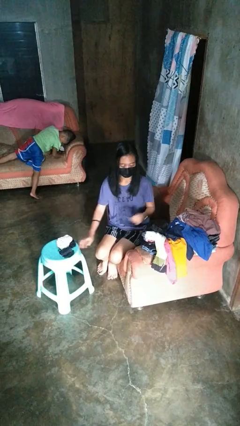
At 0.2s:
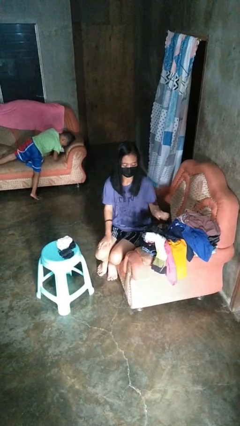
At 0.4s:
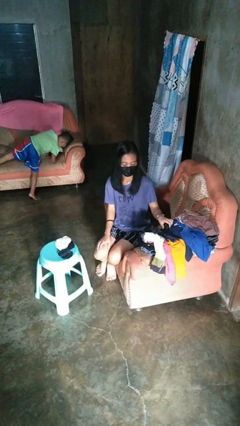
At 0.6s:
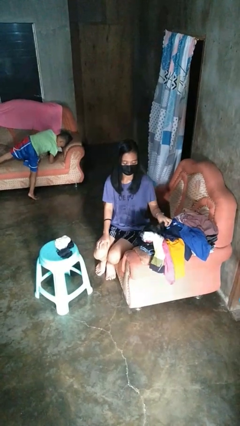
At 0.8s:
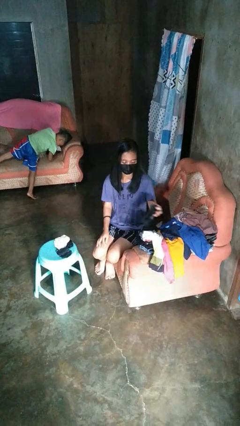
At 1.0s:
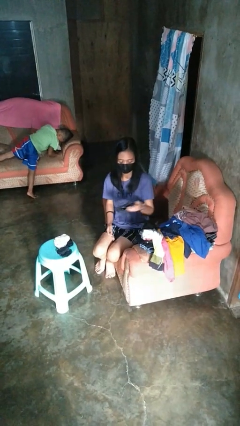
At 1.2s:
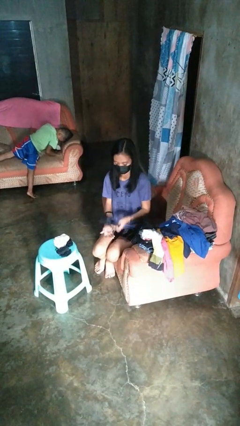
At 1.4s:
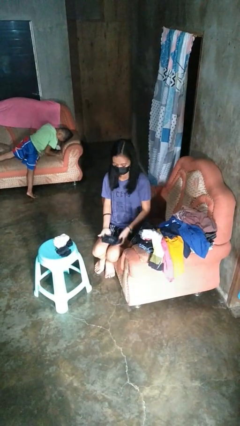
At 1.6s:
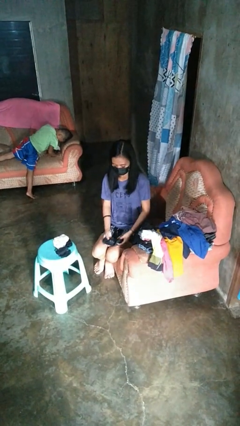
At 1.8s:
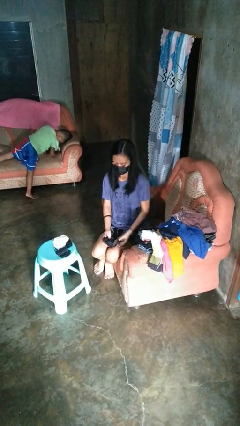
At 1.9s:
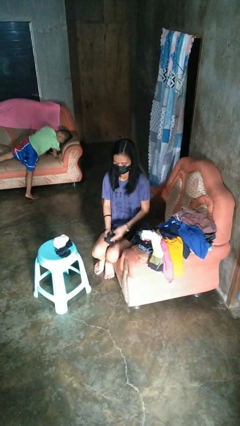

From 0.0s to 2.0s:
person folds socks

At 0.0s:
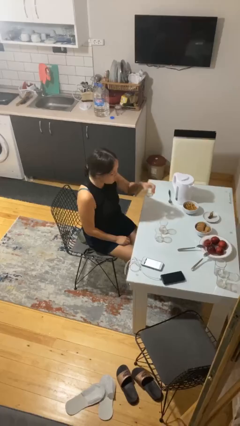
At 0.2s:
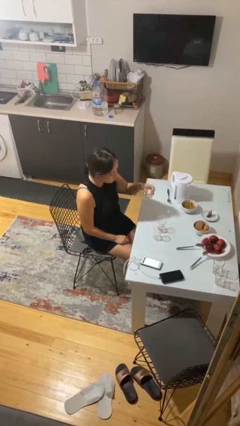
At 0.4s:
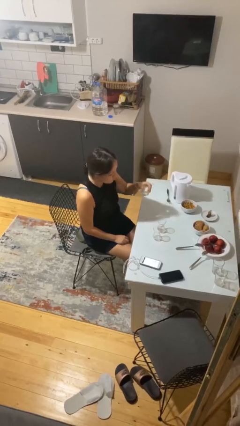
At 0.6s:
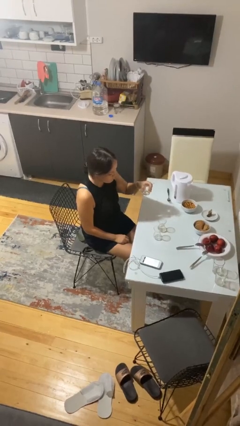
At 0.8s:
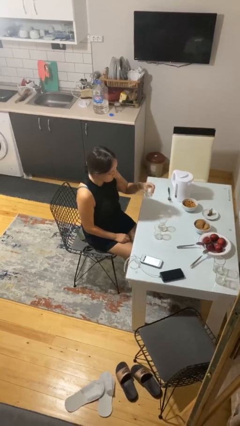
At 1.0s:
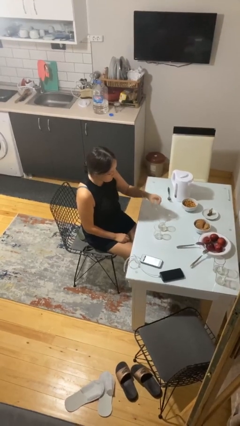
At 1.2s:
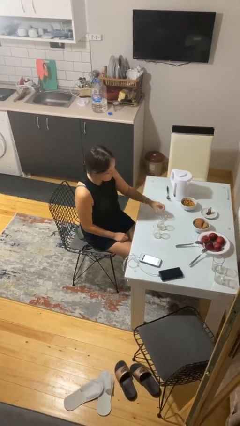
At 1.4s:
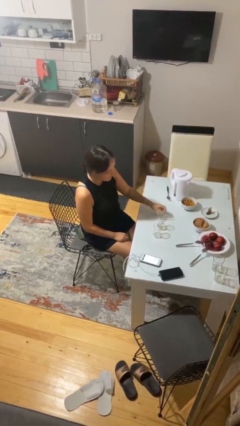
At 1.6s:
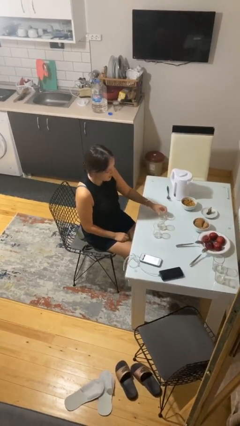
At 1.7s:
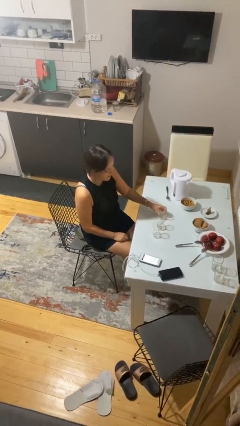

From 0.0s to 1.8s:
person puts down object on table

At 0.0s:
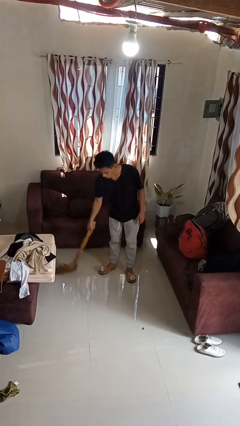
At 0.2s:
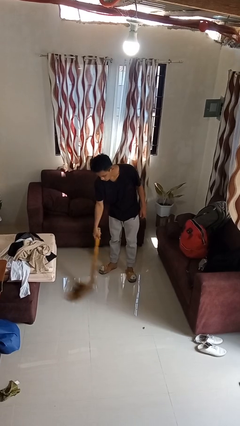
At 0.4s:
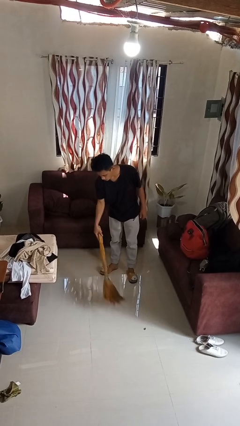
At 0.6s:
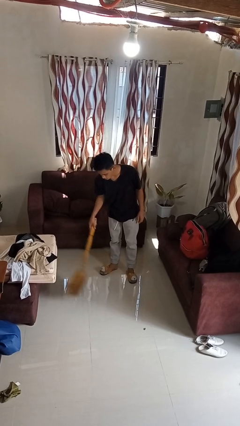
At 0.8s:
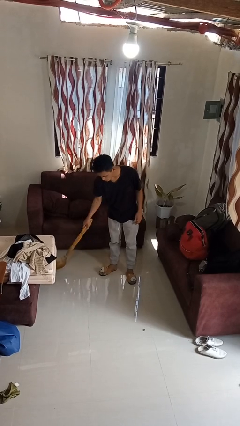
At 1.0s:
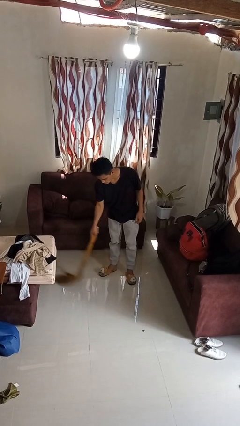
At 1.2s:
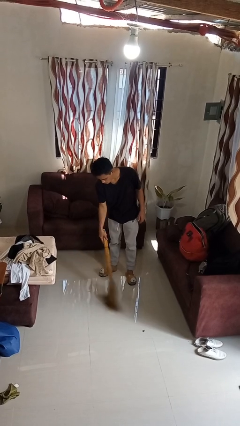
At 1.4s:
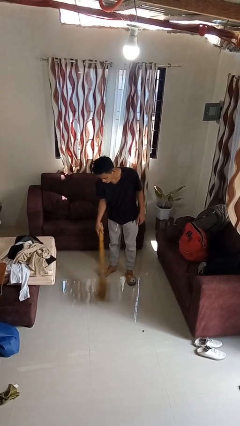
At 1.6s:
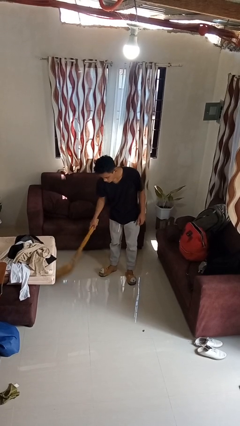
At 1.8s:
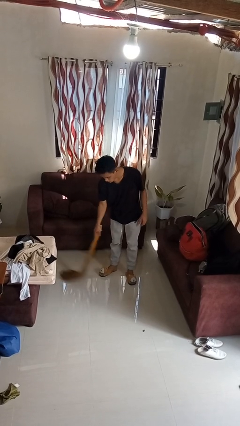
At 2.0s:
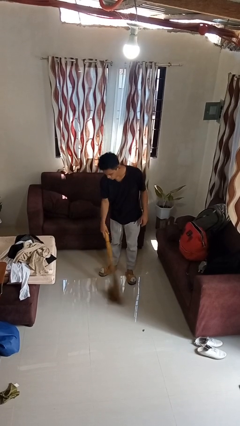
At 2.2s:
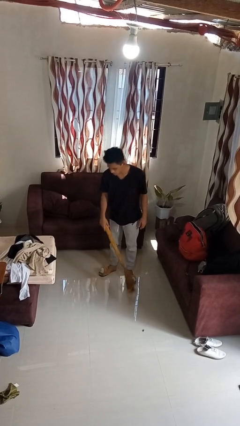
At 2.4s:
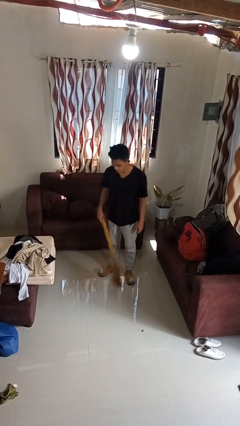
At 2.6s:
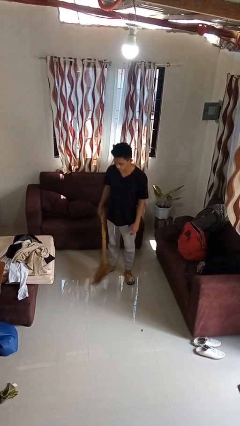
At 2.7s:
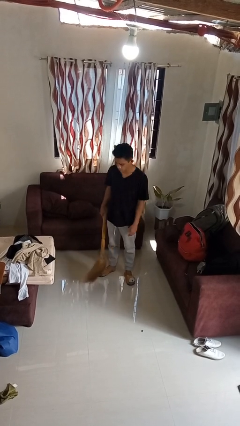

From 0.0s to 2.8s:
person sweeps floor

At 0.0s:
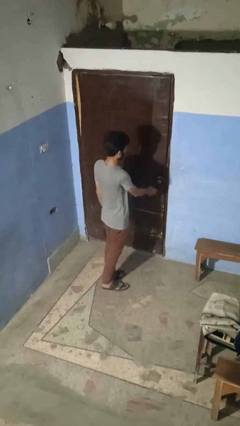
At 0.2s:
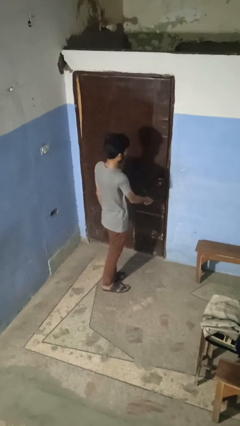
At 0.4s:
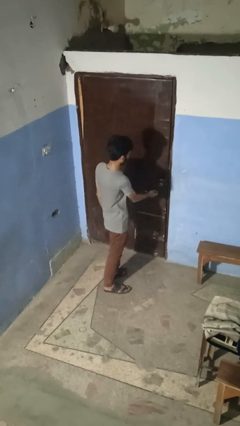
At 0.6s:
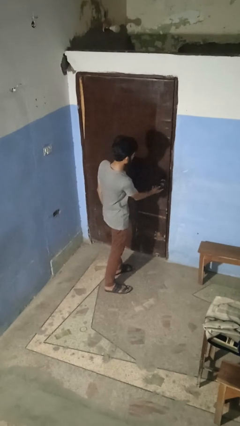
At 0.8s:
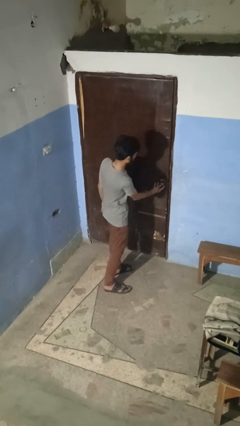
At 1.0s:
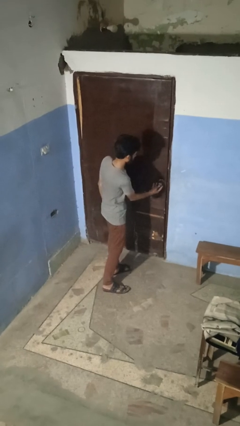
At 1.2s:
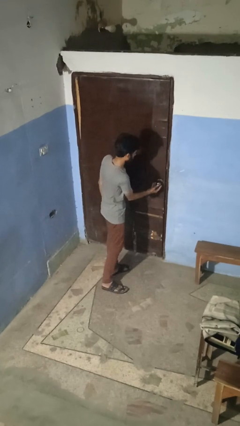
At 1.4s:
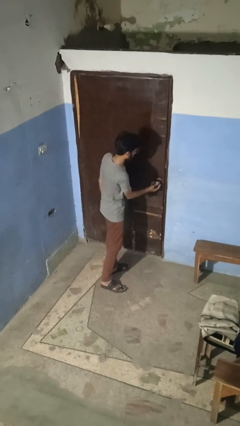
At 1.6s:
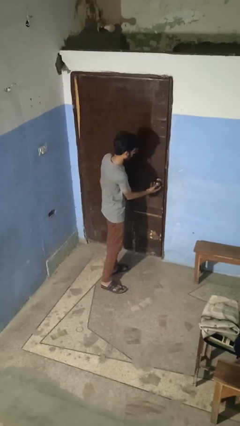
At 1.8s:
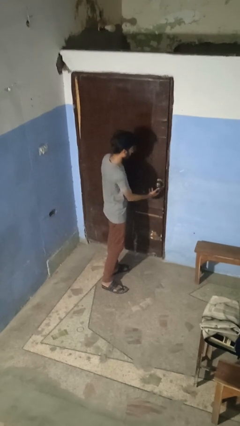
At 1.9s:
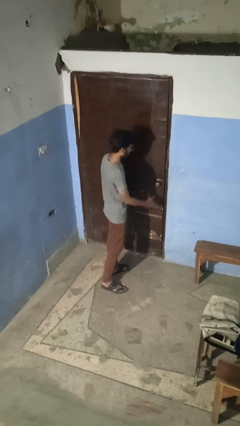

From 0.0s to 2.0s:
person locks door with keys

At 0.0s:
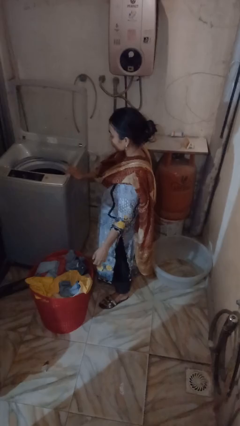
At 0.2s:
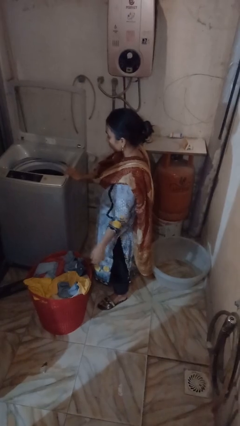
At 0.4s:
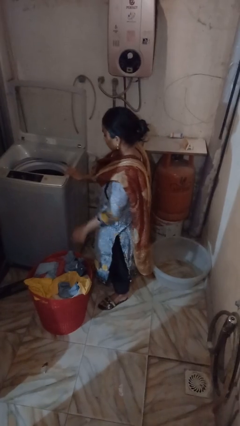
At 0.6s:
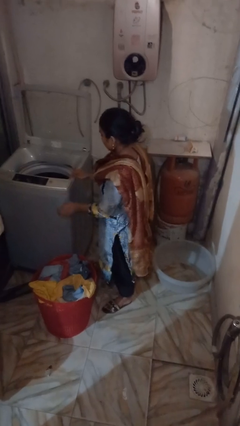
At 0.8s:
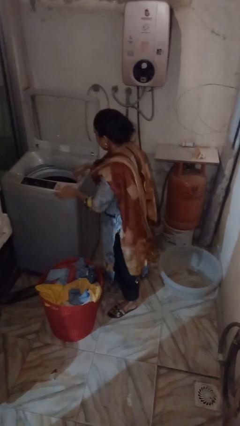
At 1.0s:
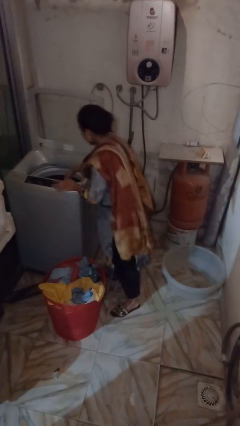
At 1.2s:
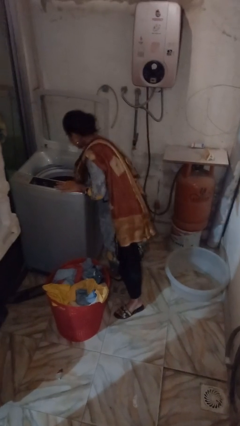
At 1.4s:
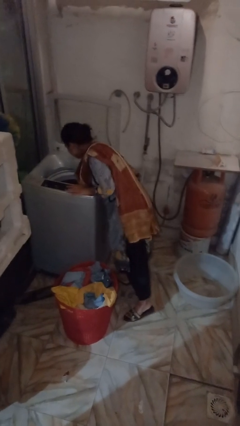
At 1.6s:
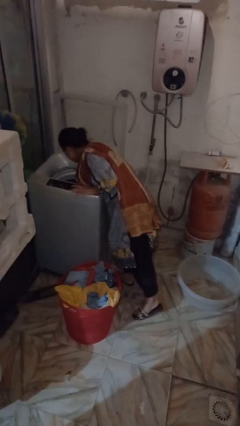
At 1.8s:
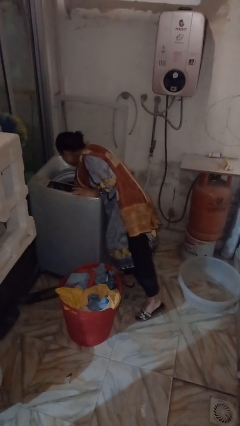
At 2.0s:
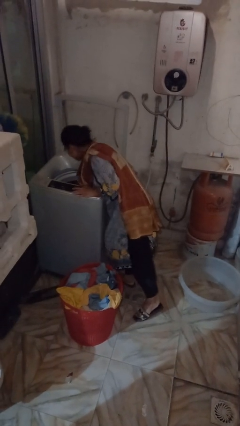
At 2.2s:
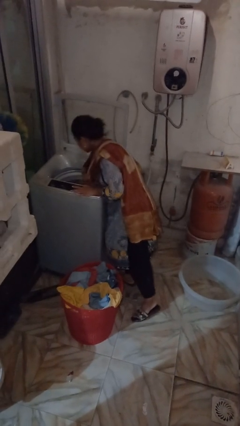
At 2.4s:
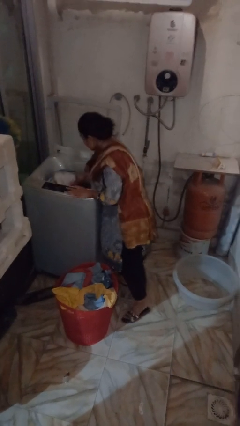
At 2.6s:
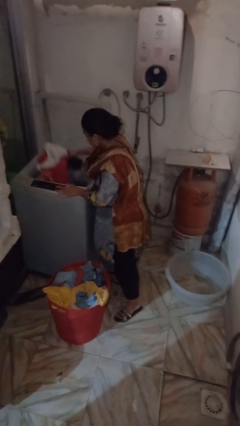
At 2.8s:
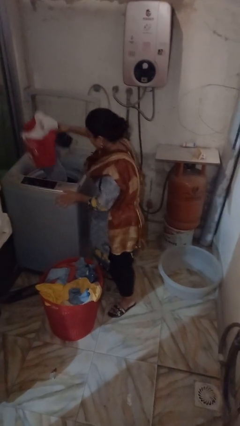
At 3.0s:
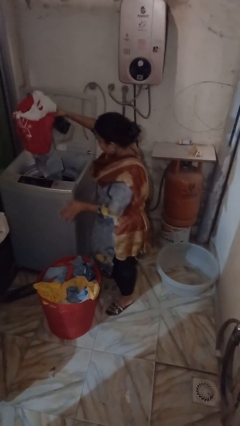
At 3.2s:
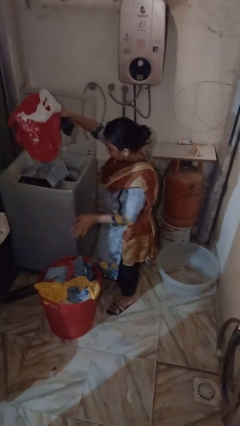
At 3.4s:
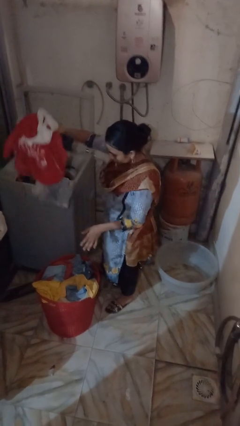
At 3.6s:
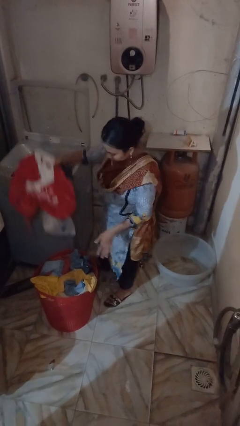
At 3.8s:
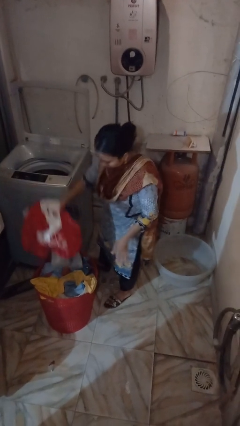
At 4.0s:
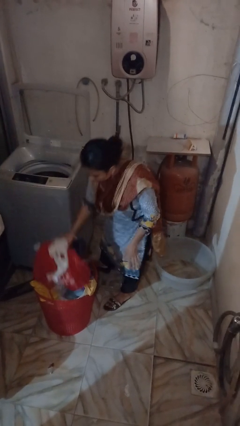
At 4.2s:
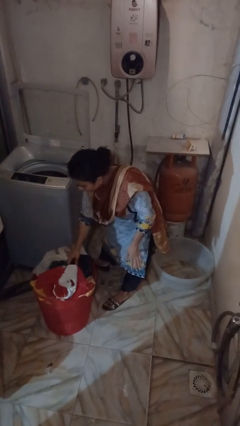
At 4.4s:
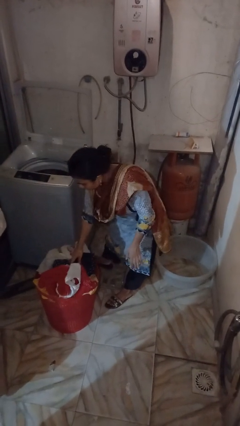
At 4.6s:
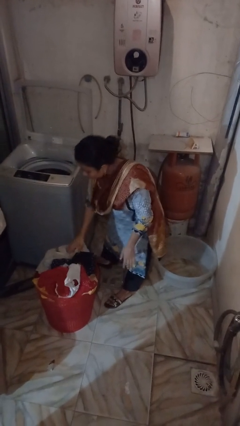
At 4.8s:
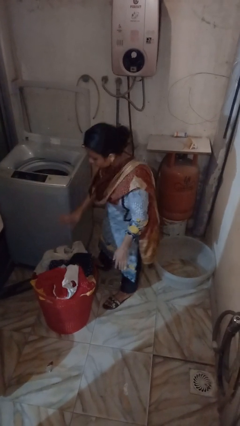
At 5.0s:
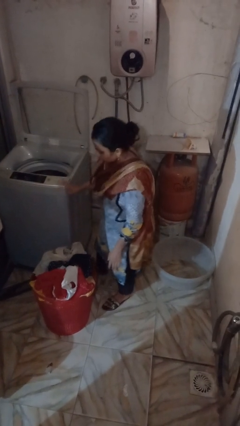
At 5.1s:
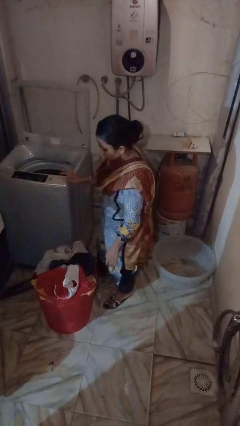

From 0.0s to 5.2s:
person unloads dryer

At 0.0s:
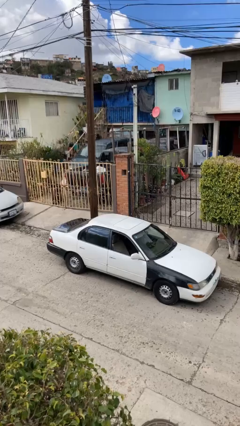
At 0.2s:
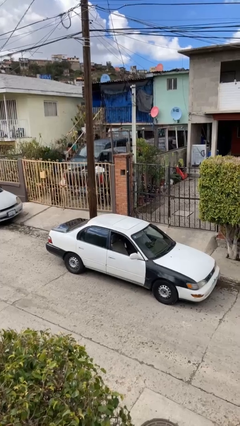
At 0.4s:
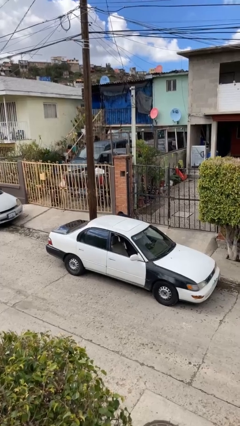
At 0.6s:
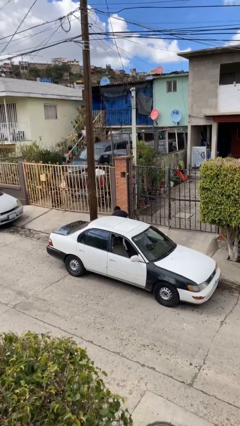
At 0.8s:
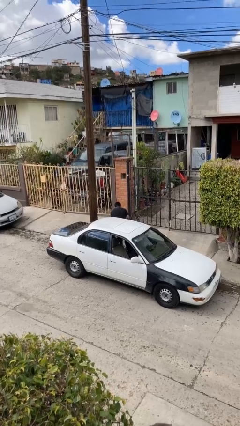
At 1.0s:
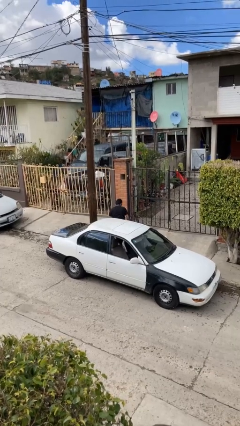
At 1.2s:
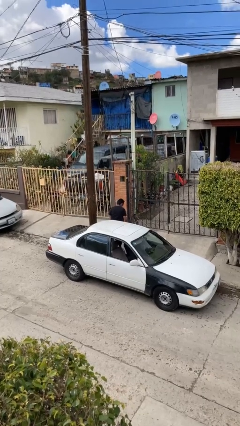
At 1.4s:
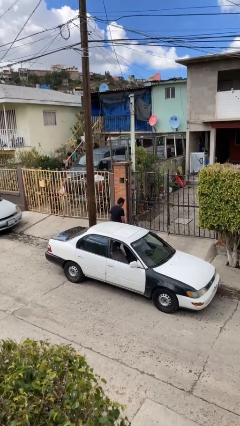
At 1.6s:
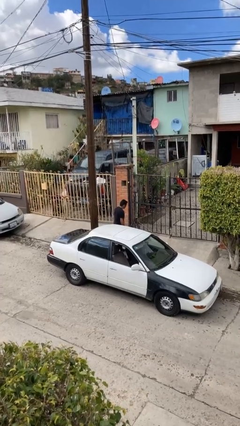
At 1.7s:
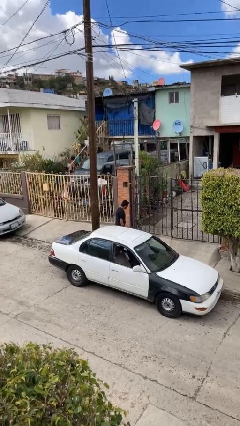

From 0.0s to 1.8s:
person exits car

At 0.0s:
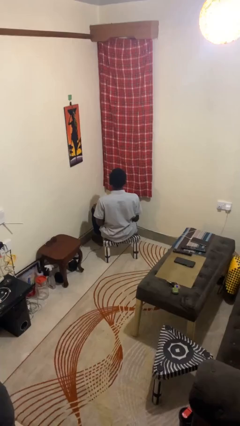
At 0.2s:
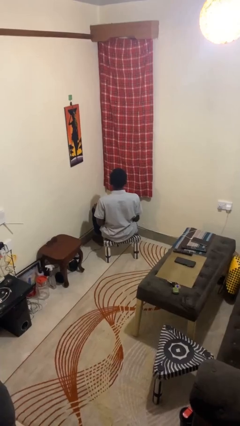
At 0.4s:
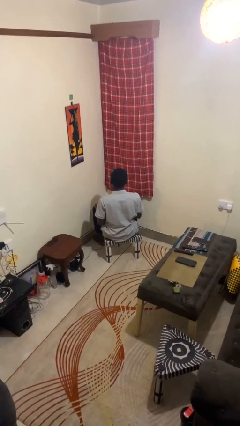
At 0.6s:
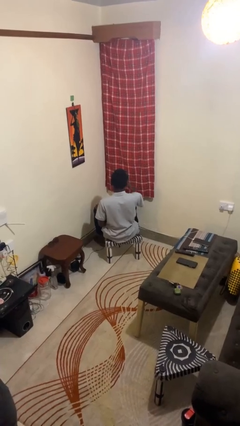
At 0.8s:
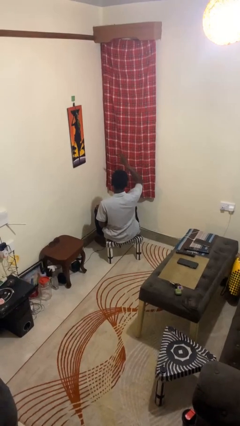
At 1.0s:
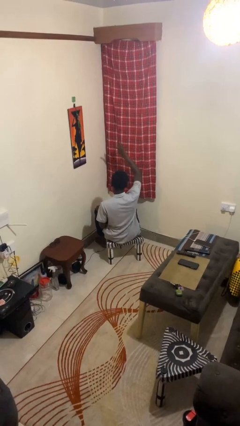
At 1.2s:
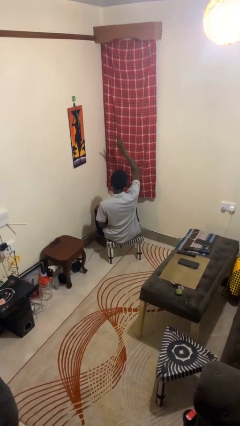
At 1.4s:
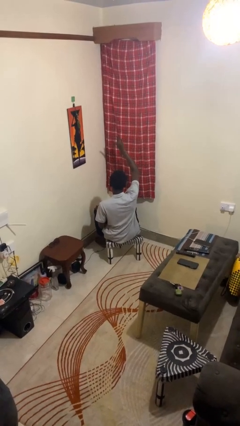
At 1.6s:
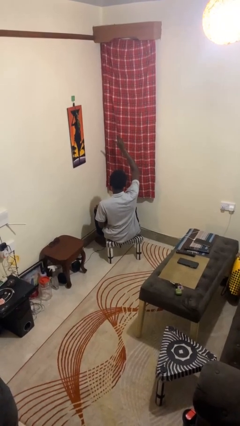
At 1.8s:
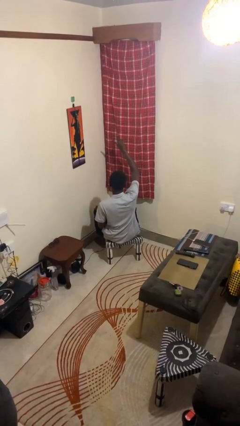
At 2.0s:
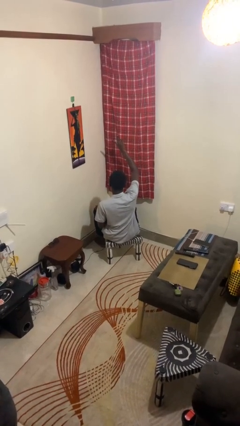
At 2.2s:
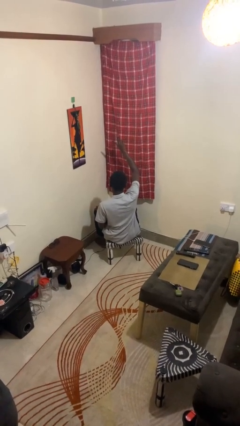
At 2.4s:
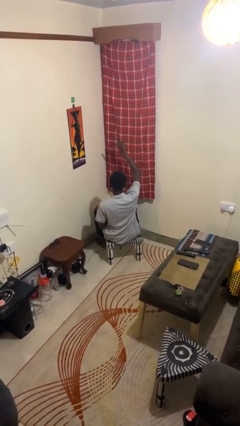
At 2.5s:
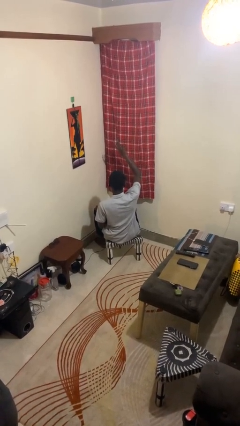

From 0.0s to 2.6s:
person gestures peace
